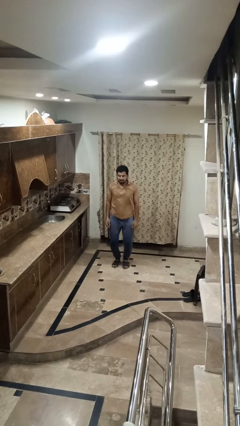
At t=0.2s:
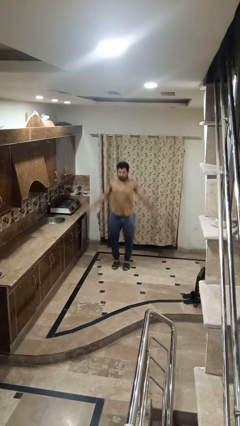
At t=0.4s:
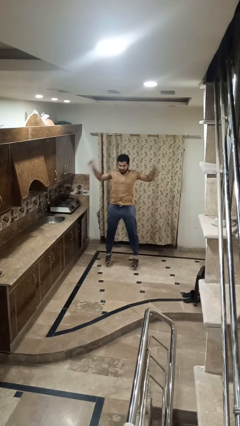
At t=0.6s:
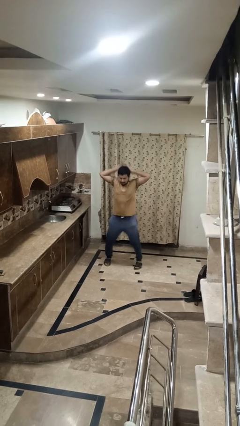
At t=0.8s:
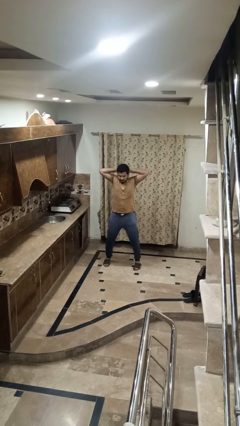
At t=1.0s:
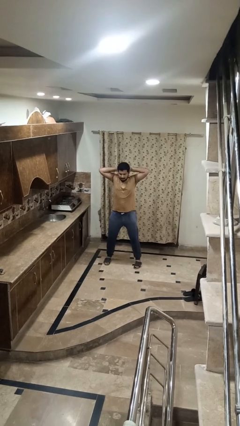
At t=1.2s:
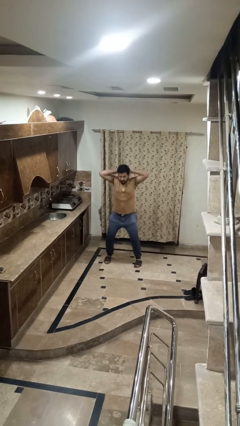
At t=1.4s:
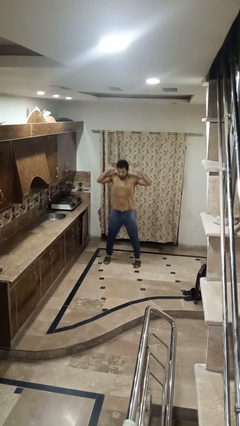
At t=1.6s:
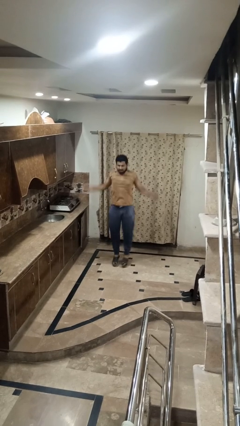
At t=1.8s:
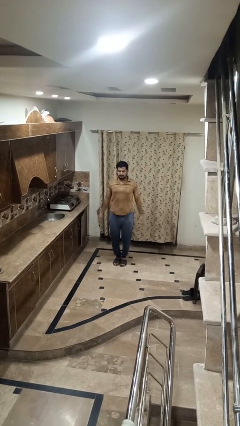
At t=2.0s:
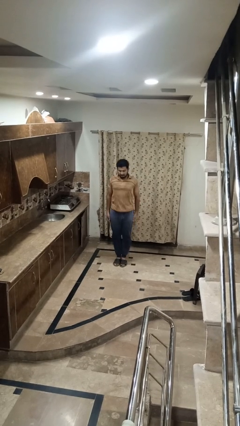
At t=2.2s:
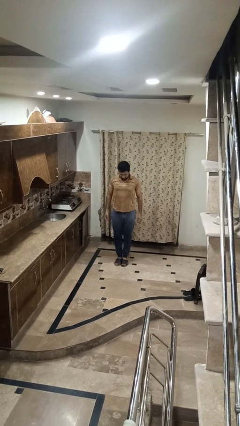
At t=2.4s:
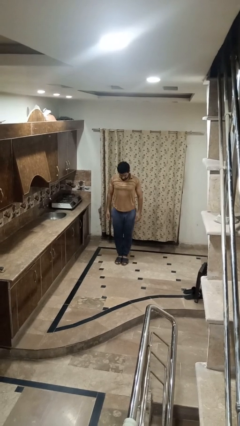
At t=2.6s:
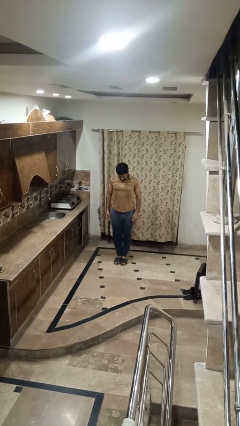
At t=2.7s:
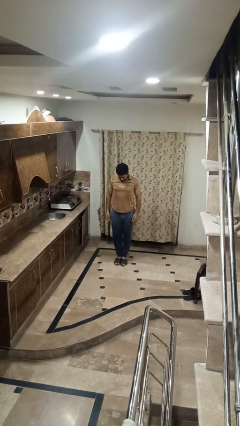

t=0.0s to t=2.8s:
person exercises with jumping jacks

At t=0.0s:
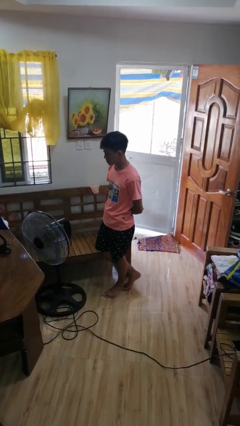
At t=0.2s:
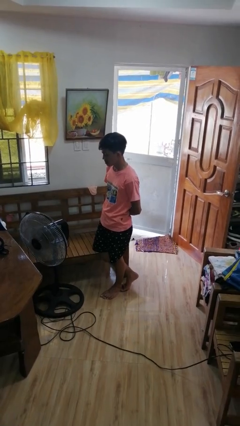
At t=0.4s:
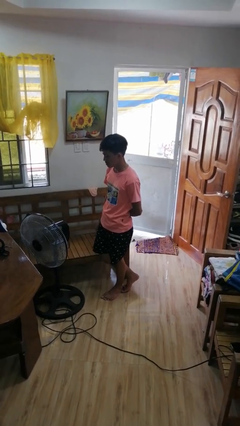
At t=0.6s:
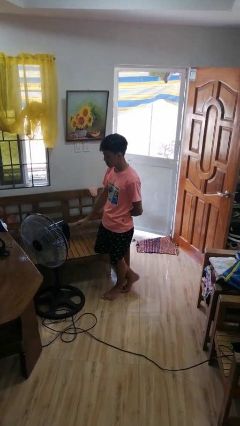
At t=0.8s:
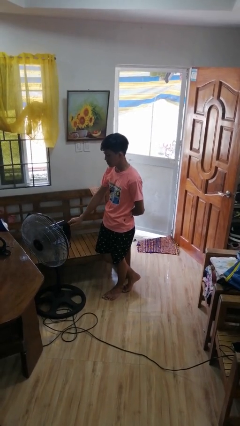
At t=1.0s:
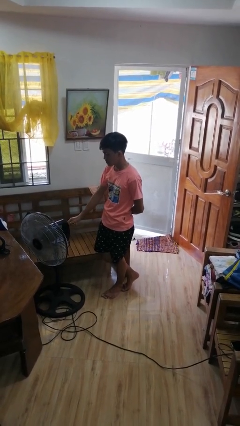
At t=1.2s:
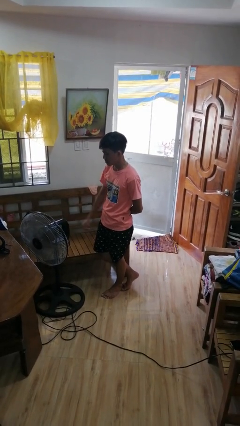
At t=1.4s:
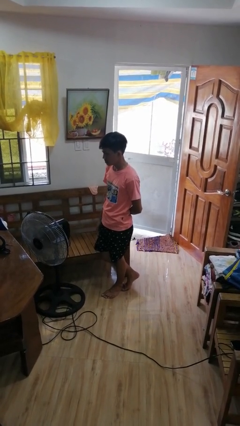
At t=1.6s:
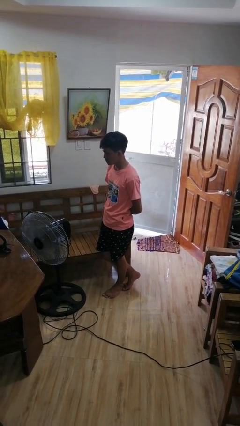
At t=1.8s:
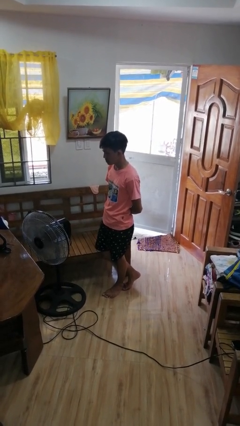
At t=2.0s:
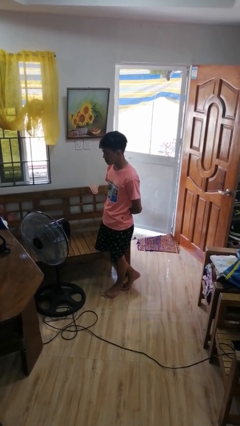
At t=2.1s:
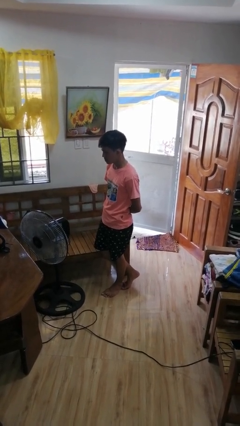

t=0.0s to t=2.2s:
person turns off fan

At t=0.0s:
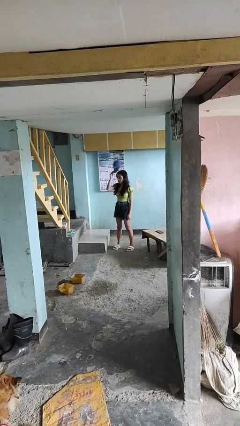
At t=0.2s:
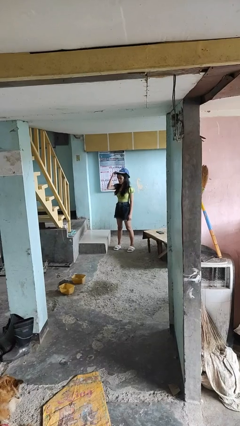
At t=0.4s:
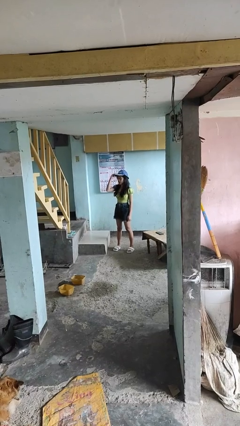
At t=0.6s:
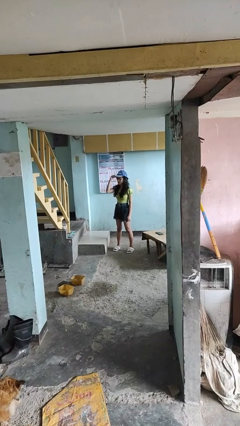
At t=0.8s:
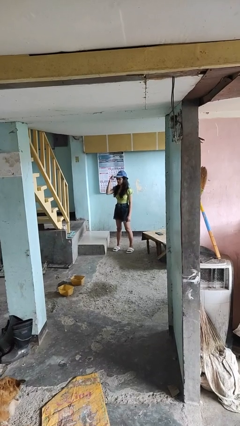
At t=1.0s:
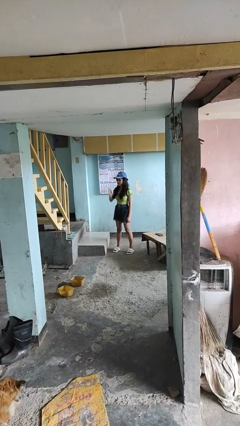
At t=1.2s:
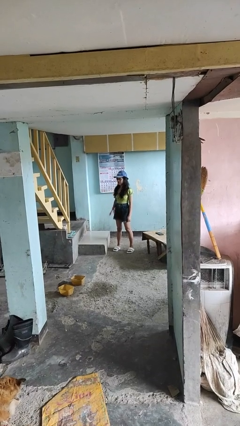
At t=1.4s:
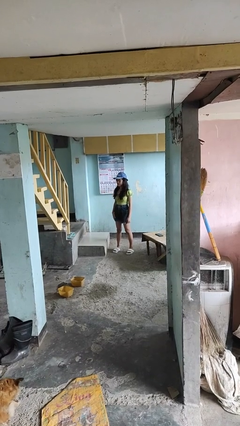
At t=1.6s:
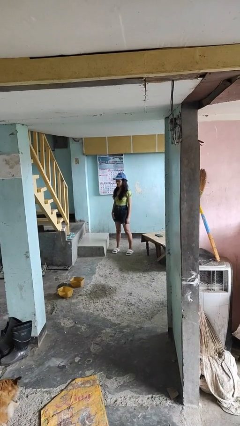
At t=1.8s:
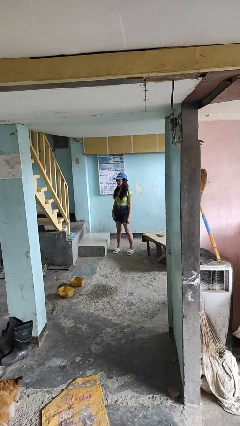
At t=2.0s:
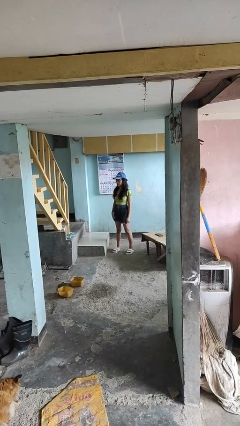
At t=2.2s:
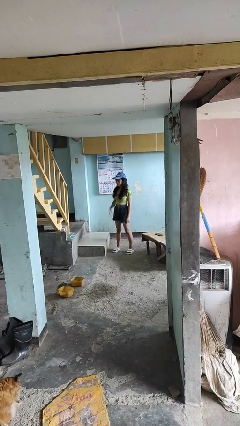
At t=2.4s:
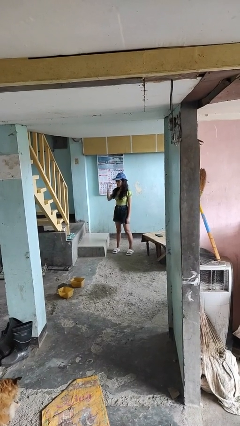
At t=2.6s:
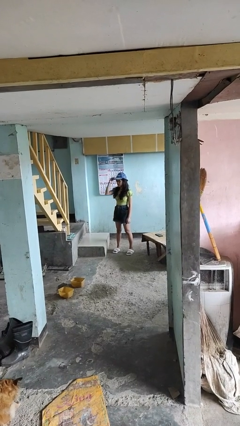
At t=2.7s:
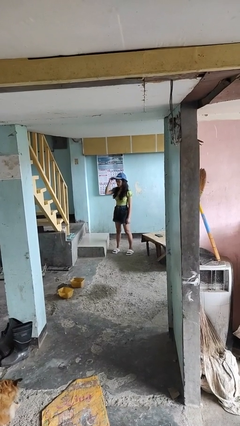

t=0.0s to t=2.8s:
person puts on hat

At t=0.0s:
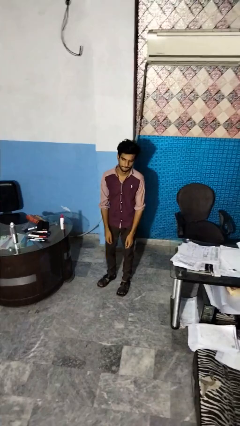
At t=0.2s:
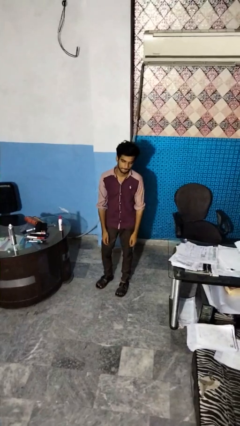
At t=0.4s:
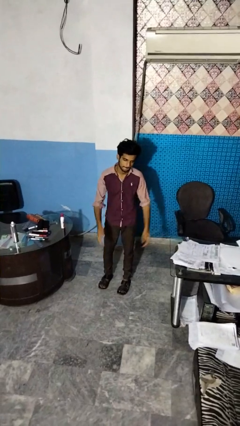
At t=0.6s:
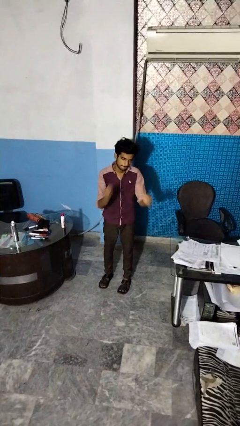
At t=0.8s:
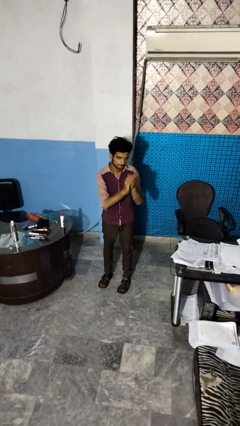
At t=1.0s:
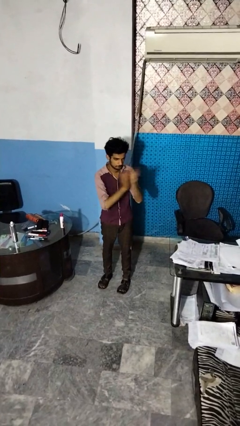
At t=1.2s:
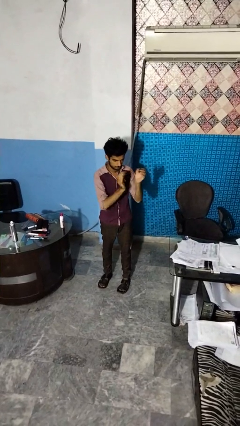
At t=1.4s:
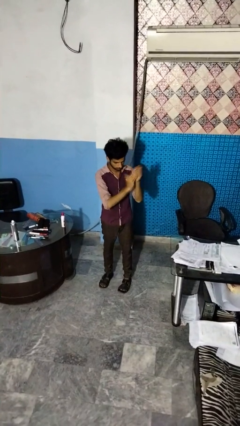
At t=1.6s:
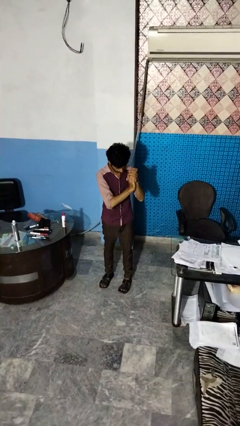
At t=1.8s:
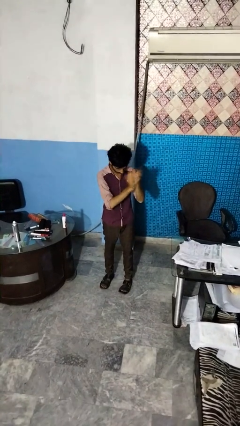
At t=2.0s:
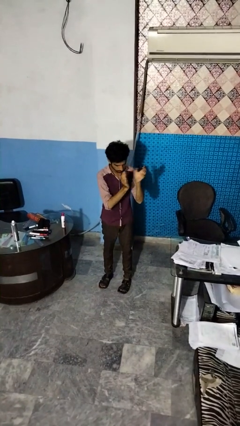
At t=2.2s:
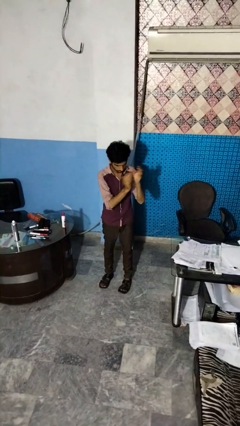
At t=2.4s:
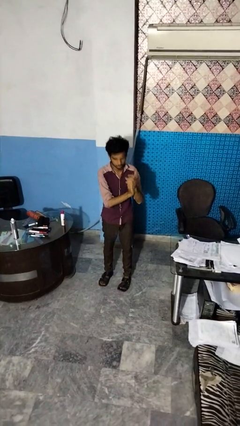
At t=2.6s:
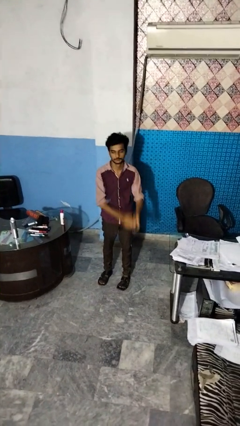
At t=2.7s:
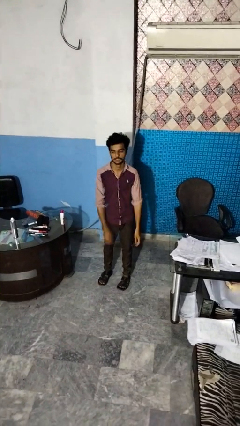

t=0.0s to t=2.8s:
person claps hands

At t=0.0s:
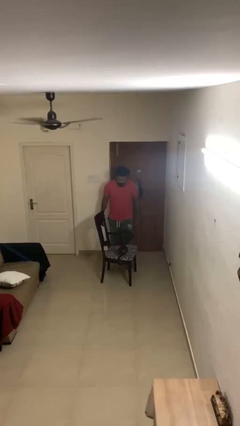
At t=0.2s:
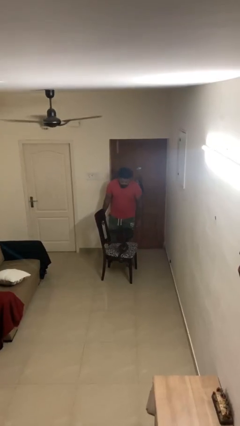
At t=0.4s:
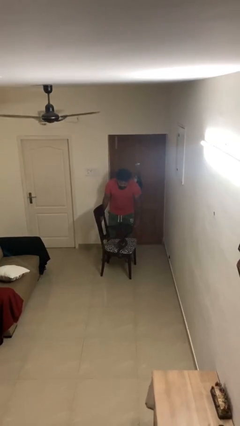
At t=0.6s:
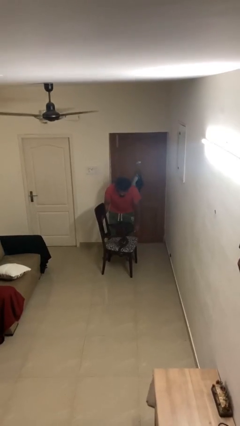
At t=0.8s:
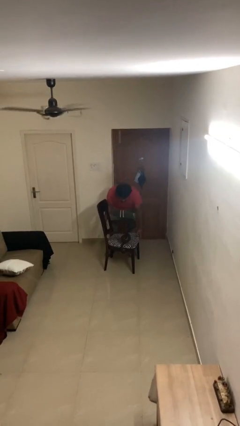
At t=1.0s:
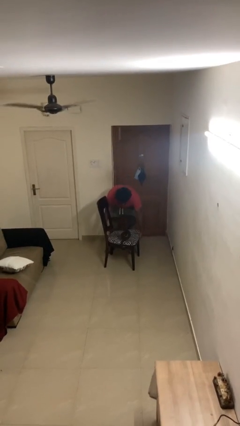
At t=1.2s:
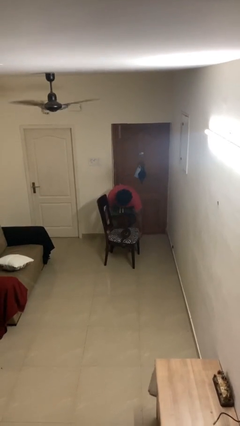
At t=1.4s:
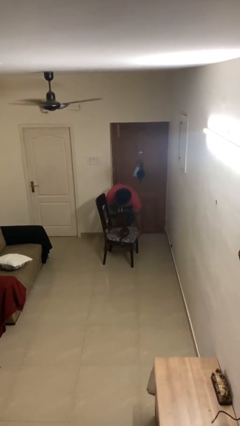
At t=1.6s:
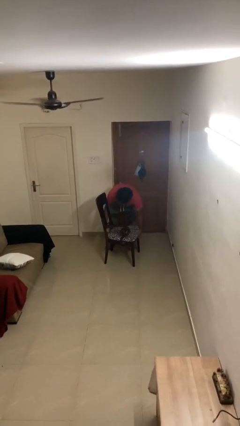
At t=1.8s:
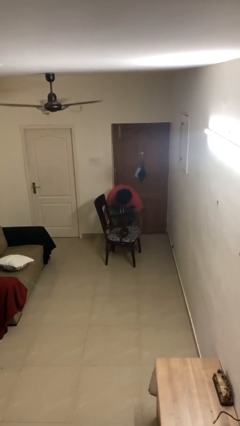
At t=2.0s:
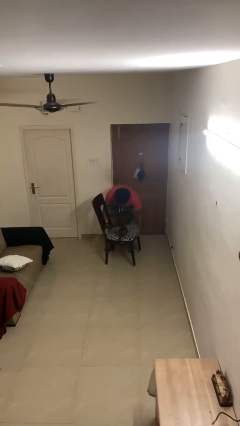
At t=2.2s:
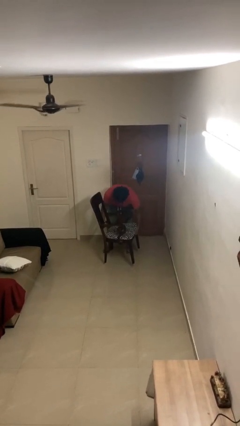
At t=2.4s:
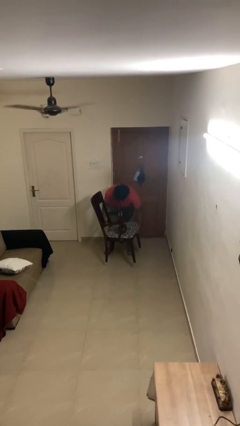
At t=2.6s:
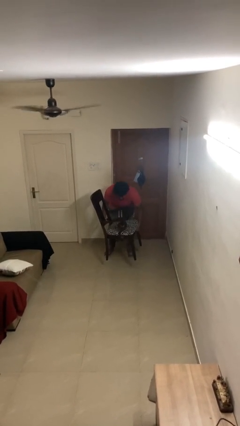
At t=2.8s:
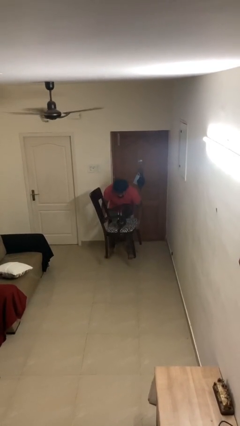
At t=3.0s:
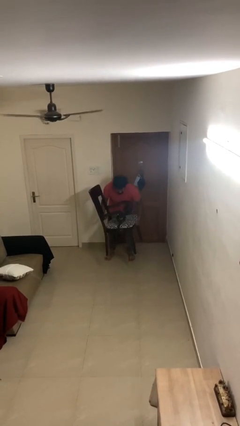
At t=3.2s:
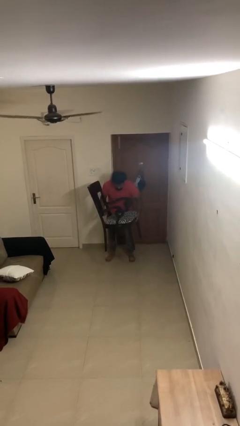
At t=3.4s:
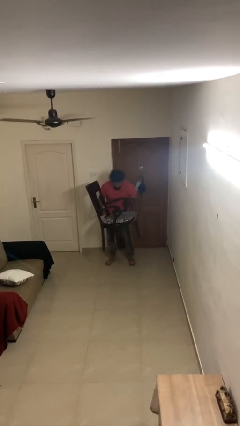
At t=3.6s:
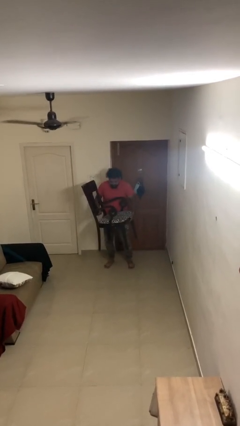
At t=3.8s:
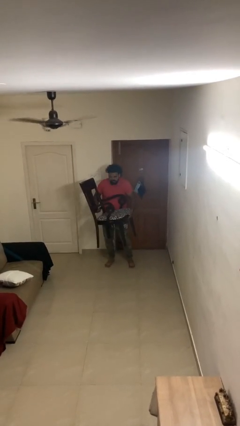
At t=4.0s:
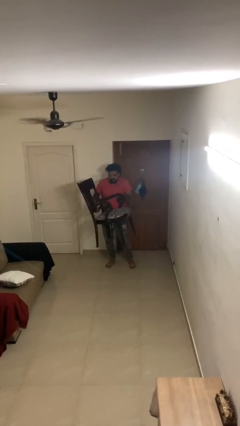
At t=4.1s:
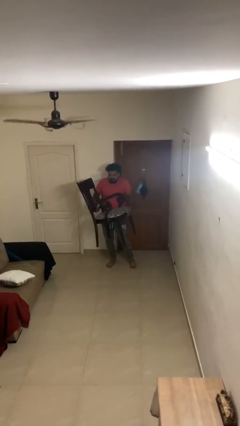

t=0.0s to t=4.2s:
person picks up object from floor

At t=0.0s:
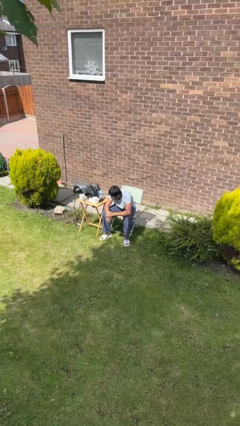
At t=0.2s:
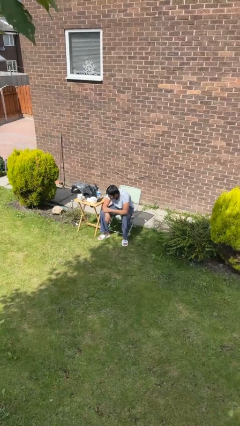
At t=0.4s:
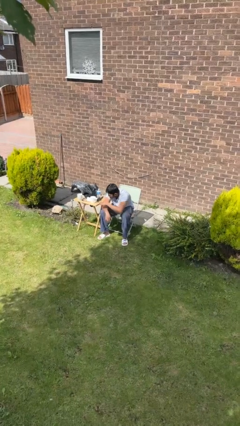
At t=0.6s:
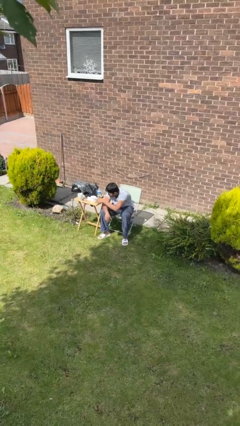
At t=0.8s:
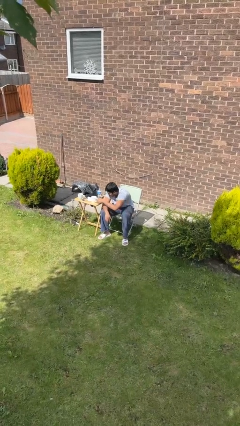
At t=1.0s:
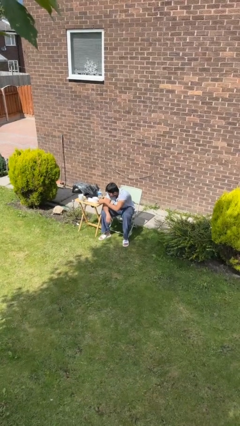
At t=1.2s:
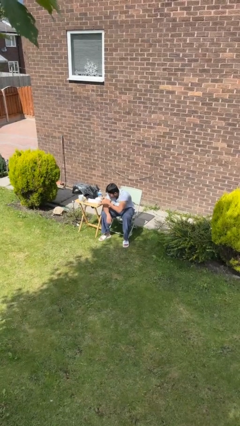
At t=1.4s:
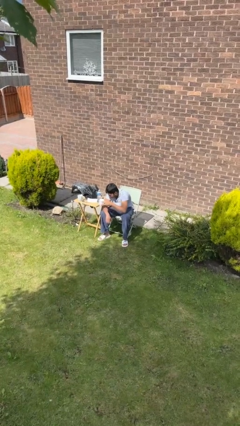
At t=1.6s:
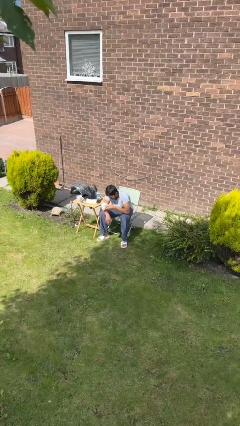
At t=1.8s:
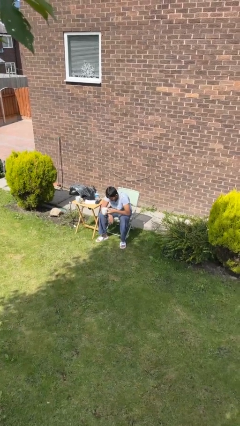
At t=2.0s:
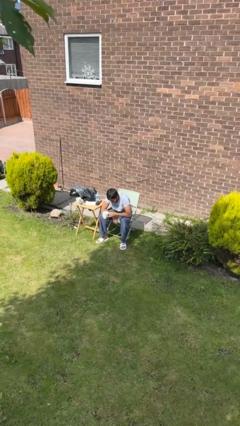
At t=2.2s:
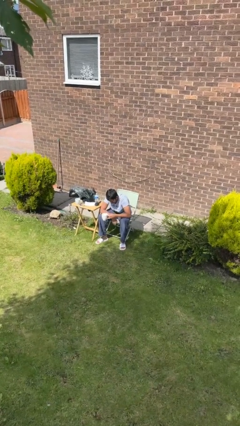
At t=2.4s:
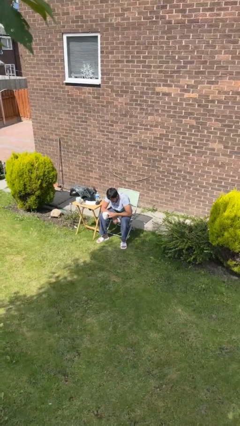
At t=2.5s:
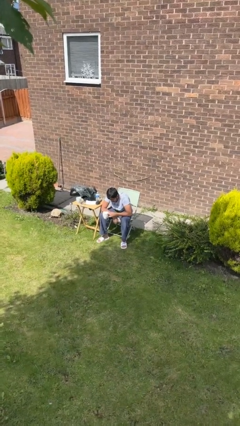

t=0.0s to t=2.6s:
person picks up object from table
